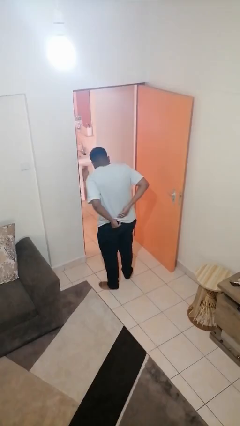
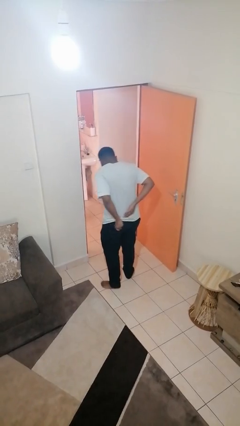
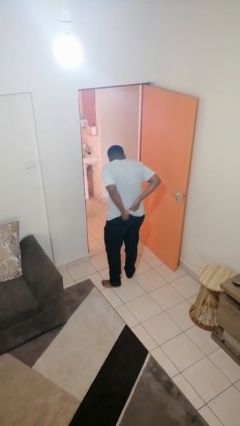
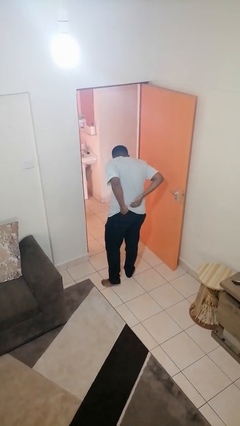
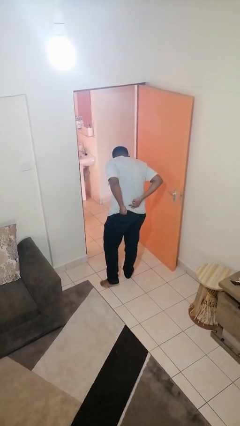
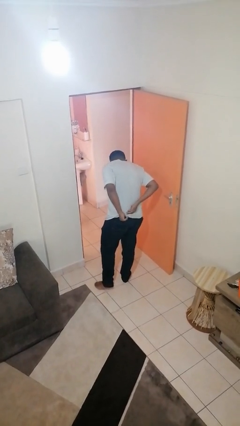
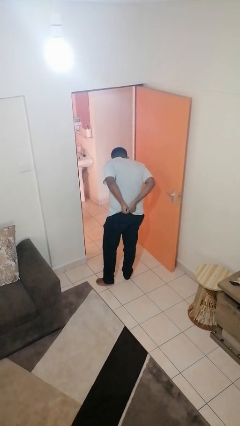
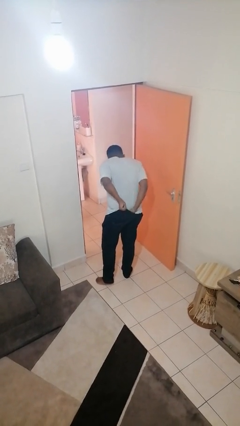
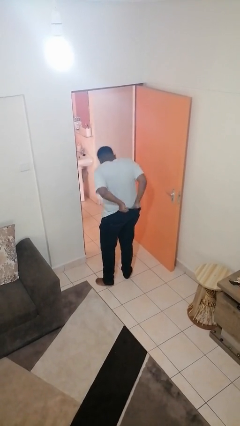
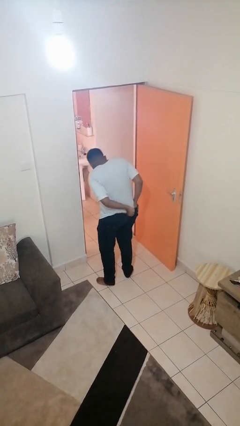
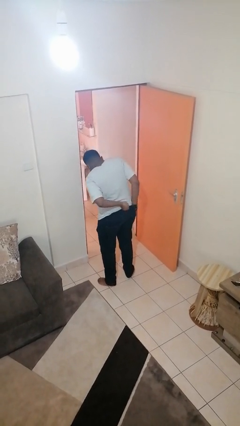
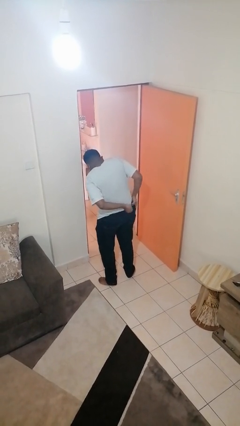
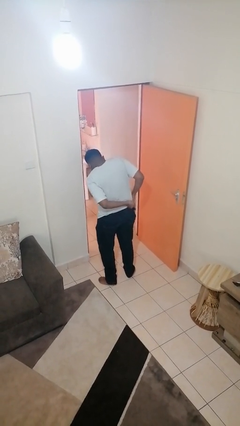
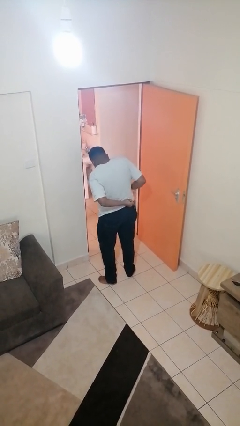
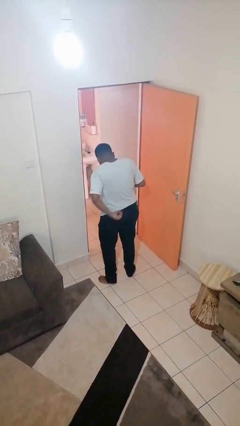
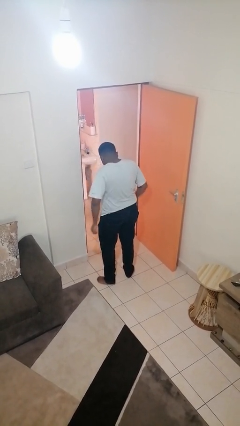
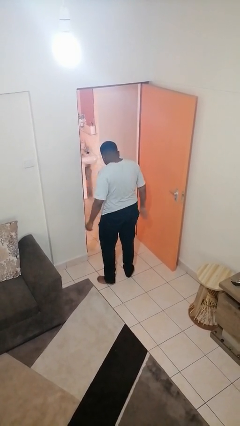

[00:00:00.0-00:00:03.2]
person tucks in shirt

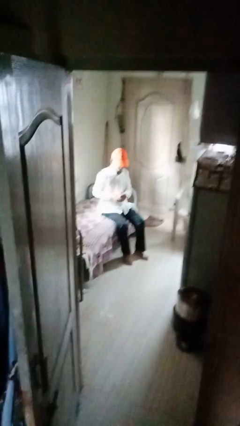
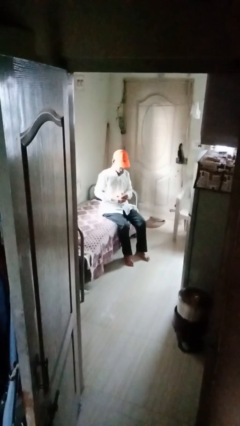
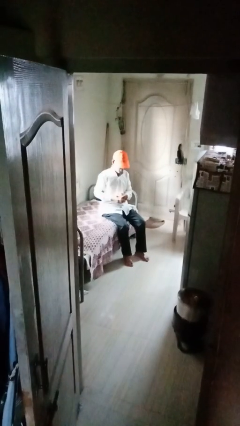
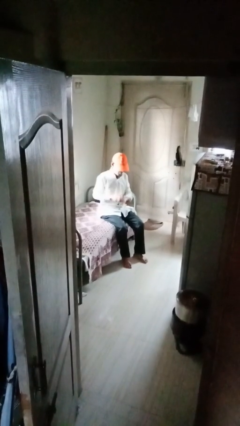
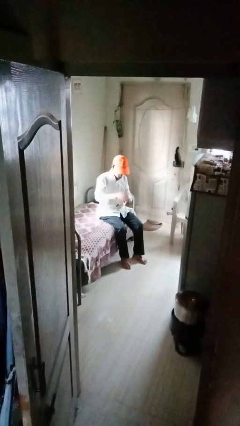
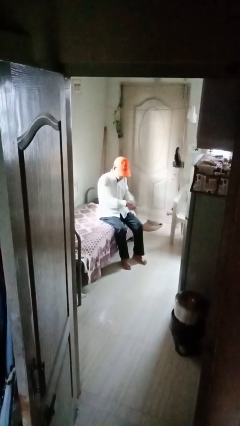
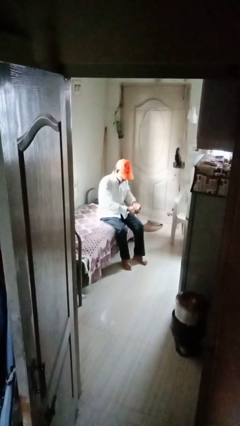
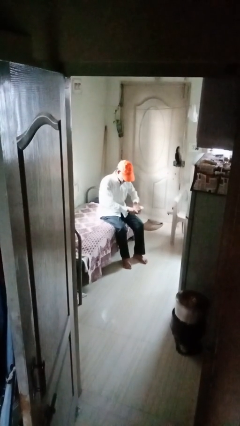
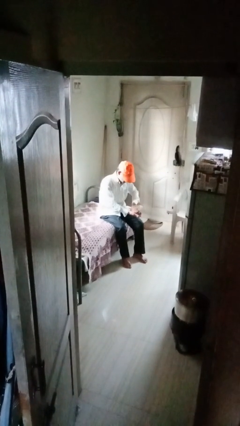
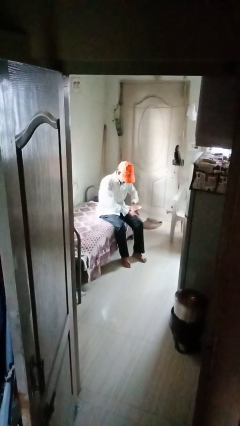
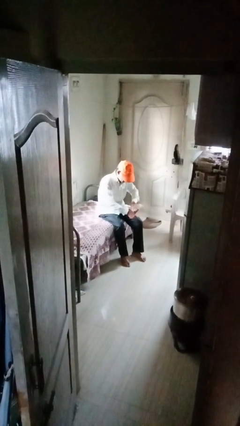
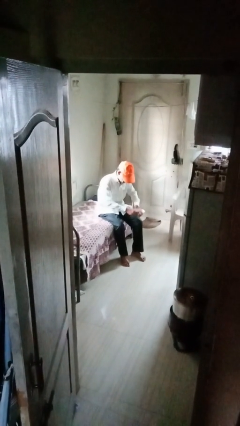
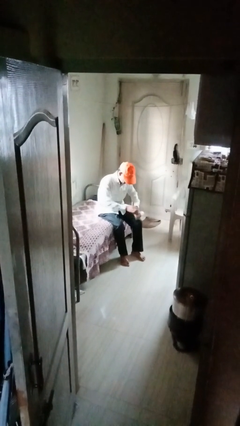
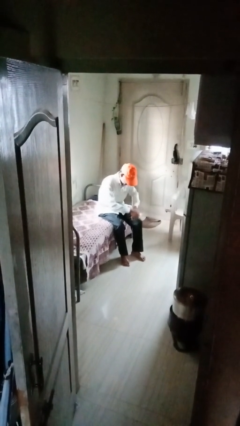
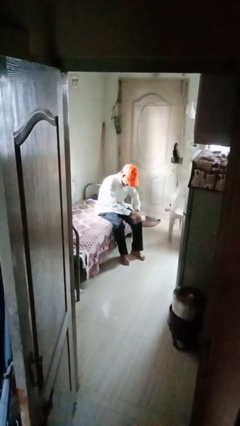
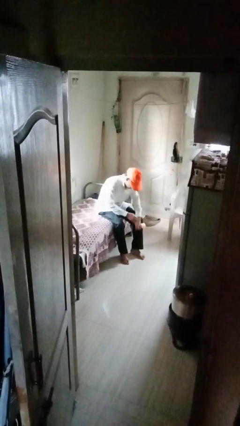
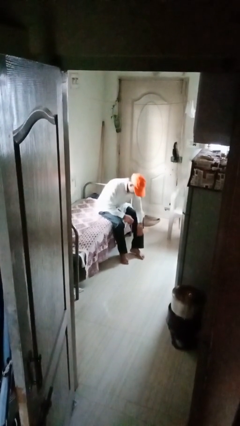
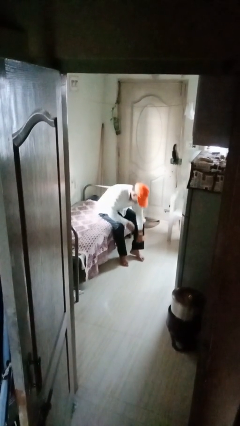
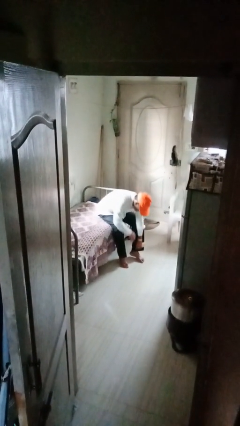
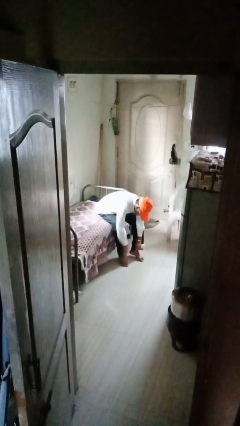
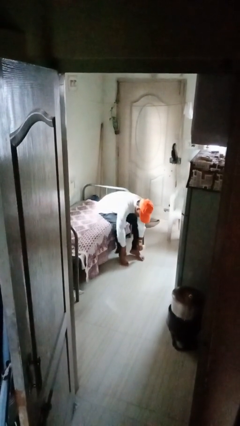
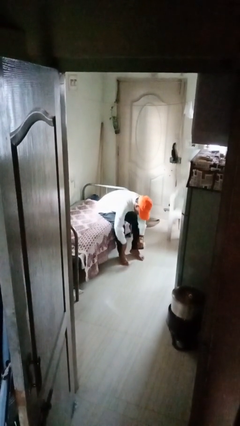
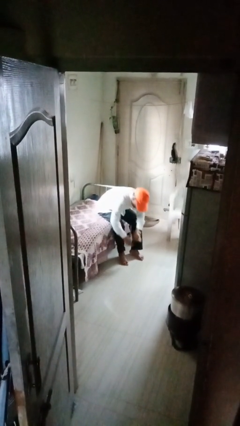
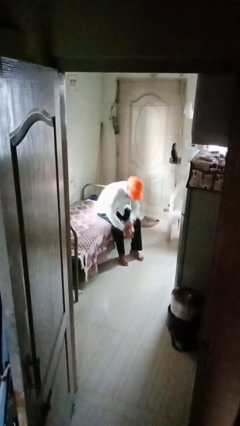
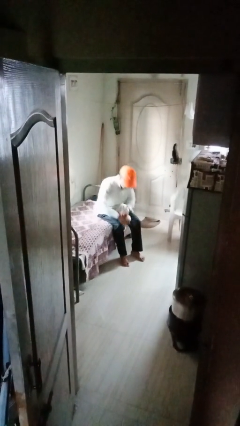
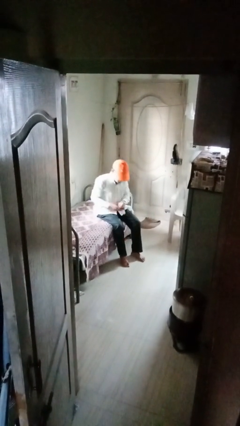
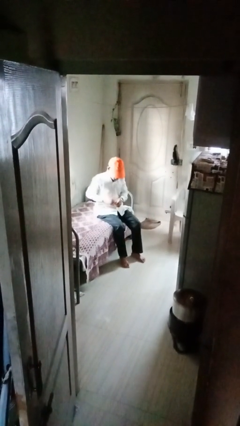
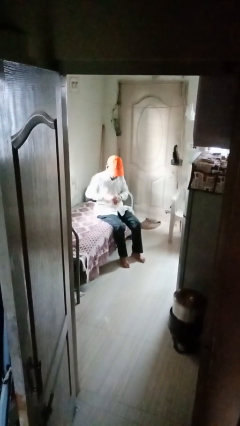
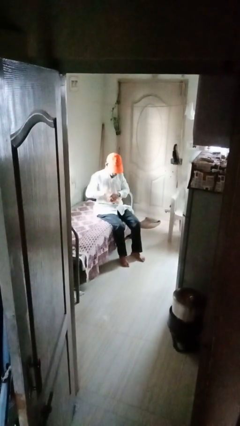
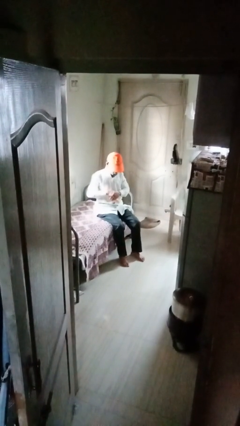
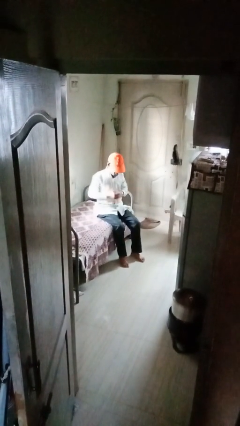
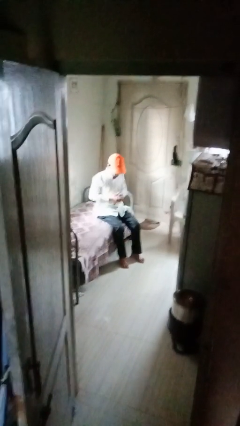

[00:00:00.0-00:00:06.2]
person applies facial moisturizer

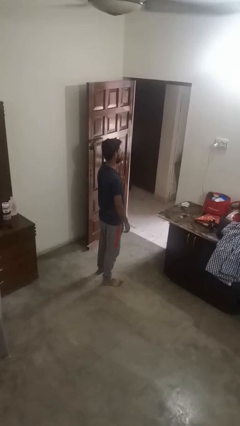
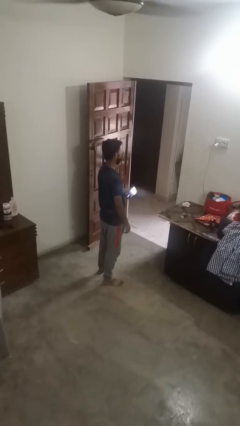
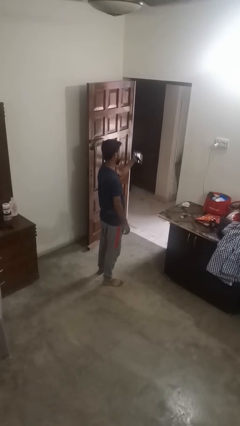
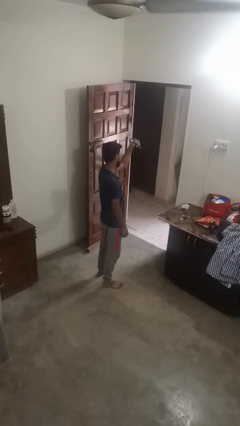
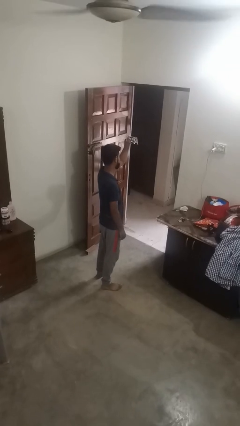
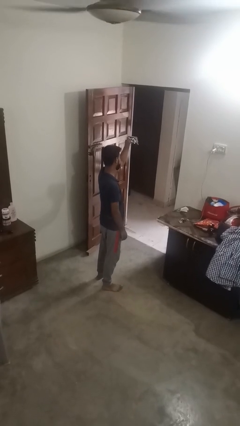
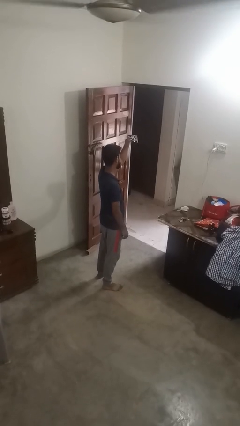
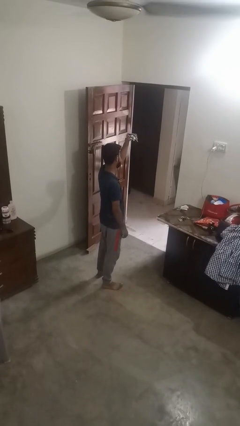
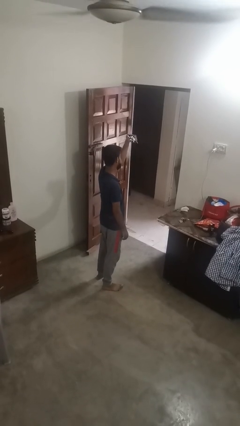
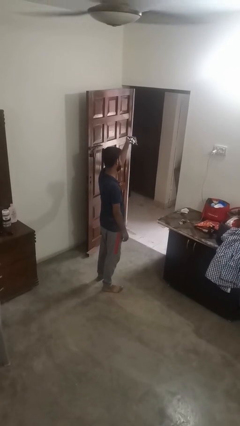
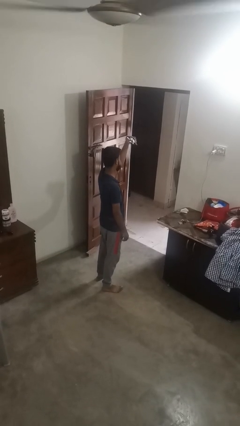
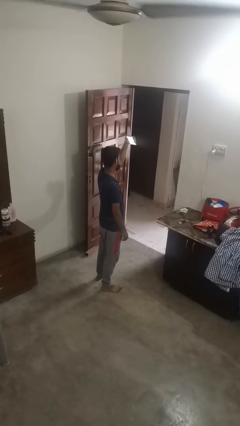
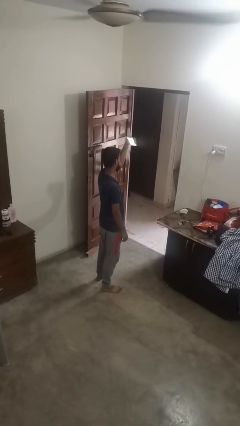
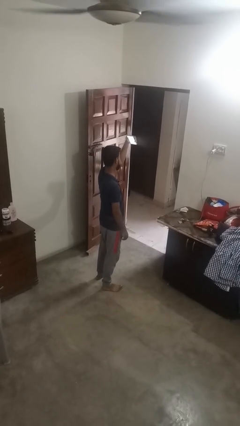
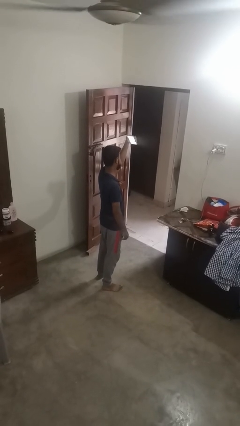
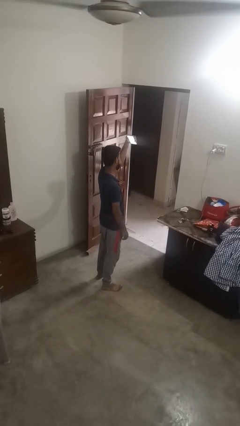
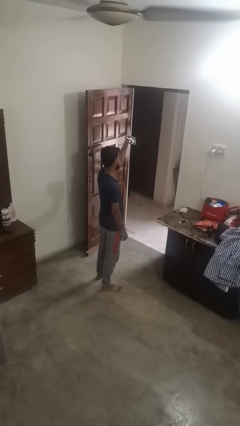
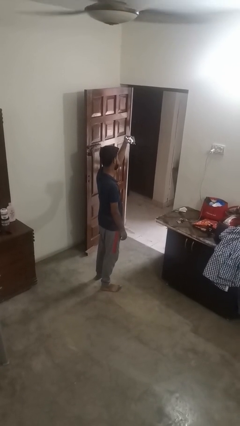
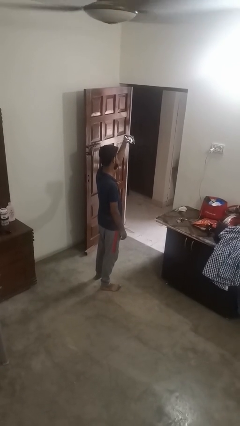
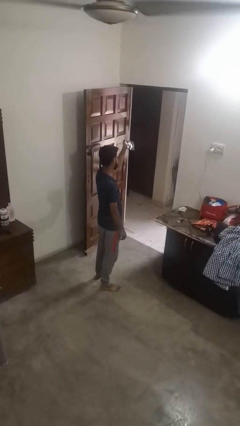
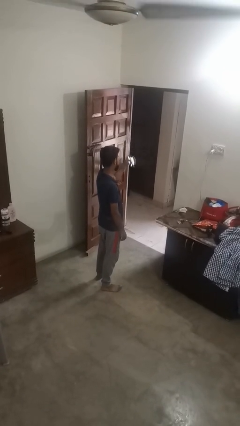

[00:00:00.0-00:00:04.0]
person takes selfie

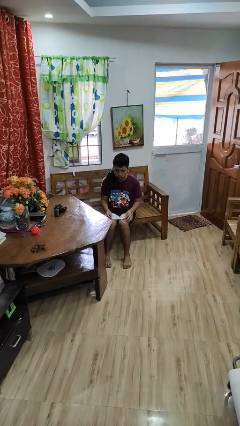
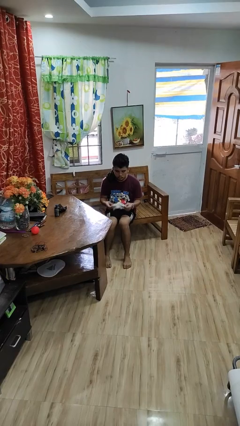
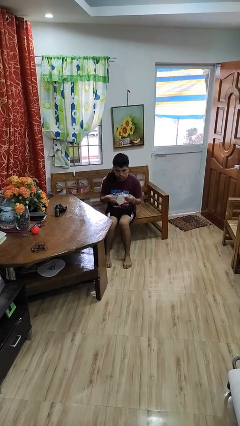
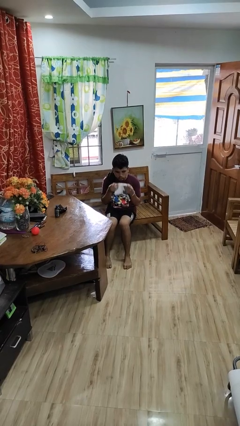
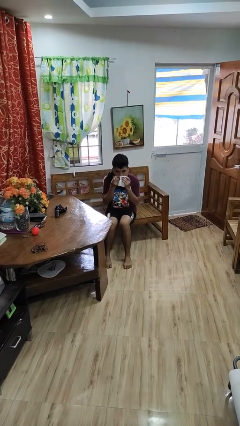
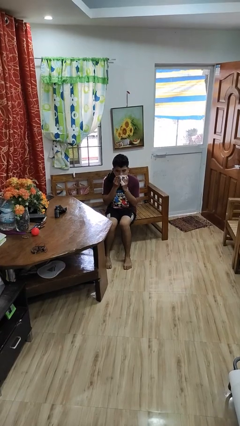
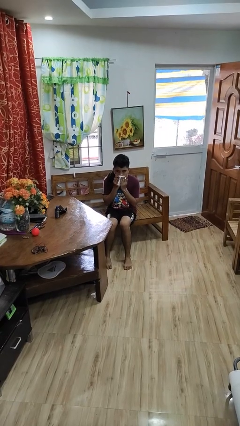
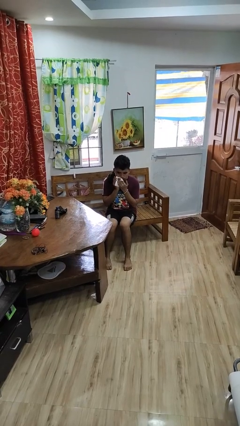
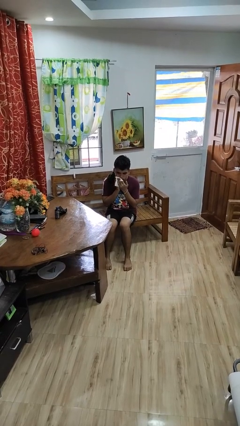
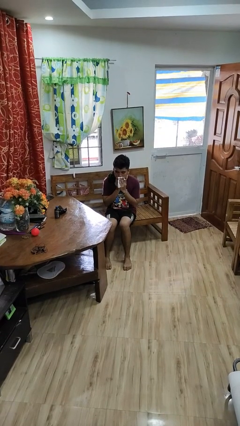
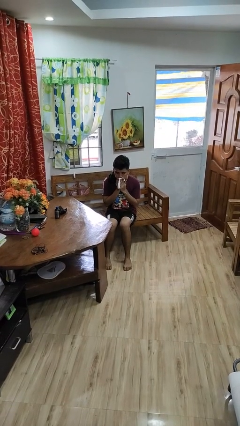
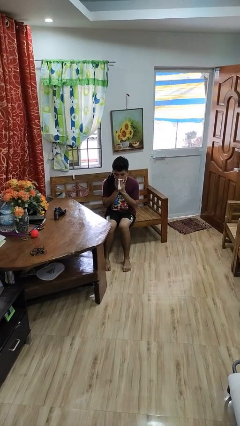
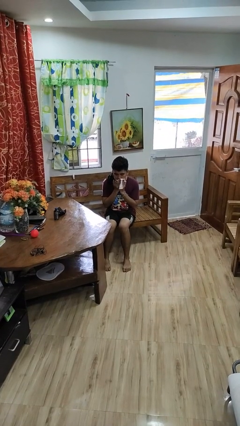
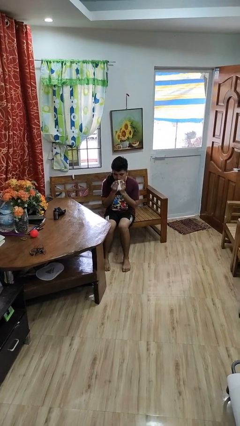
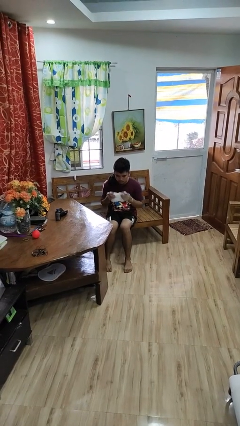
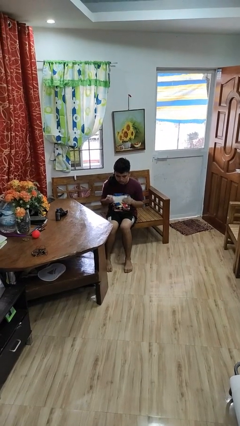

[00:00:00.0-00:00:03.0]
person wipes mouth with napkin

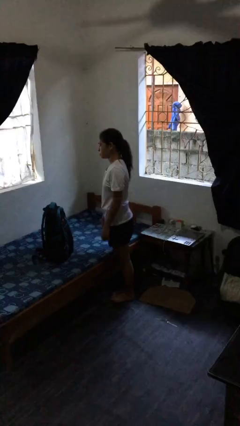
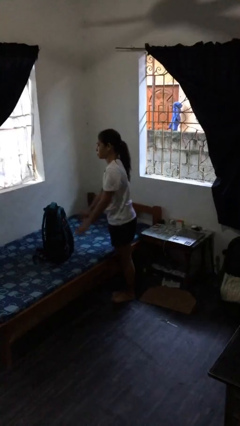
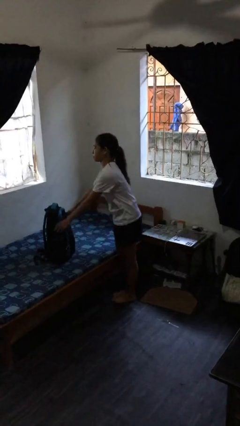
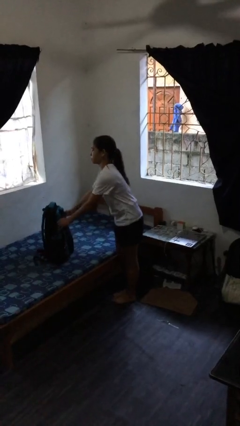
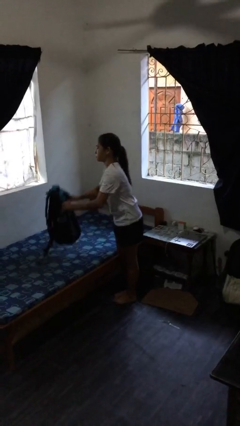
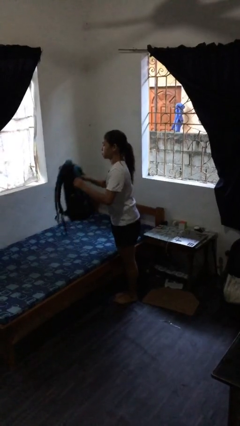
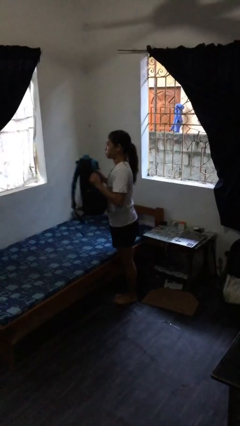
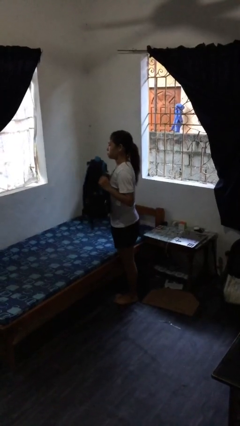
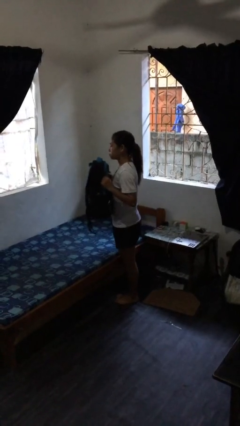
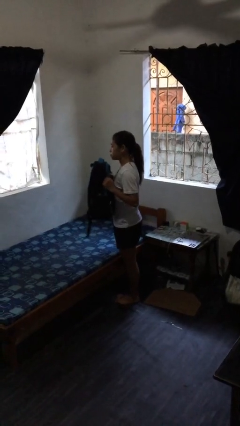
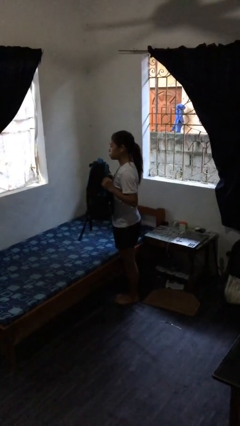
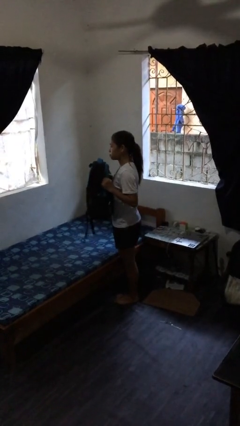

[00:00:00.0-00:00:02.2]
person picks up object from bed
